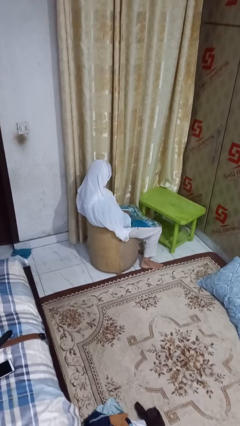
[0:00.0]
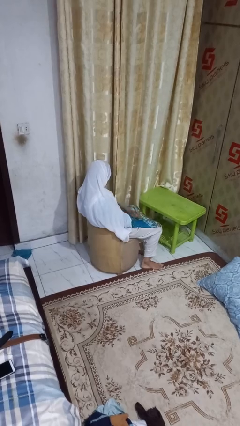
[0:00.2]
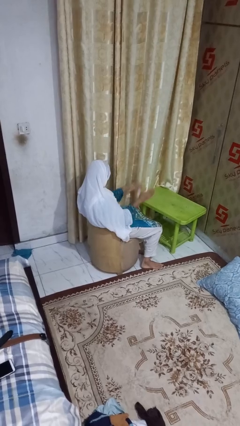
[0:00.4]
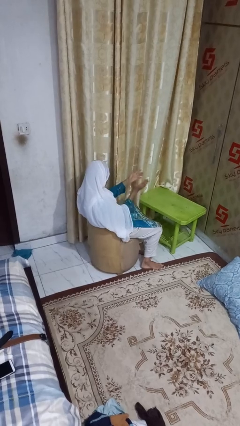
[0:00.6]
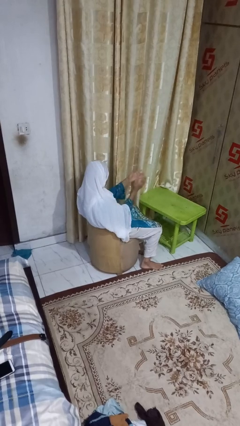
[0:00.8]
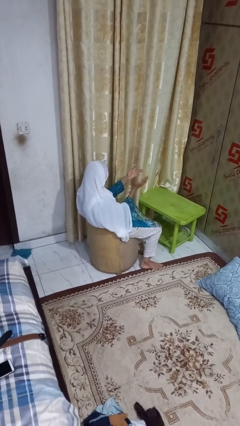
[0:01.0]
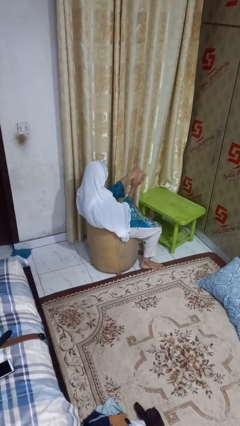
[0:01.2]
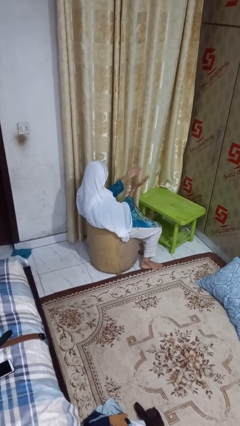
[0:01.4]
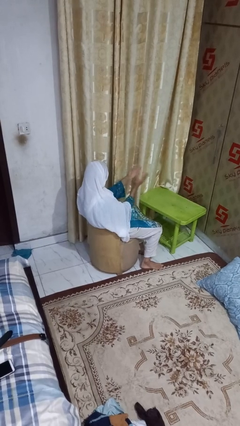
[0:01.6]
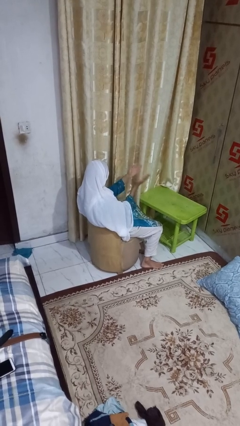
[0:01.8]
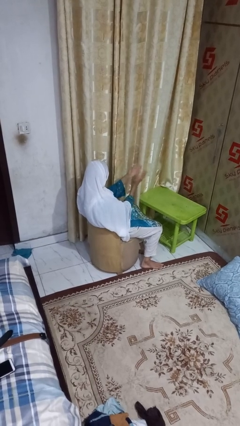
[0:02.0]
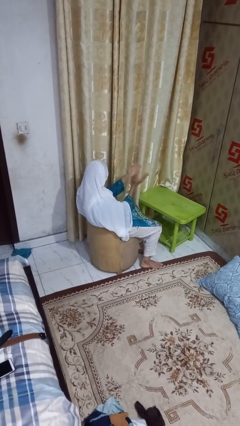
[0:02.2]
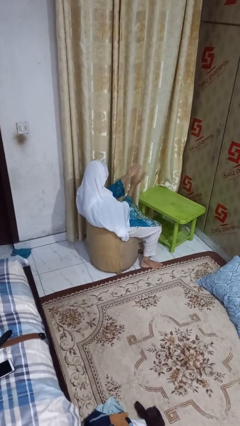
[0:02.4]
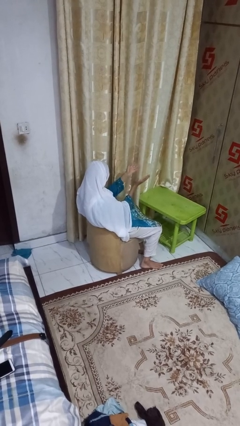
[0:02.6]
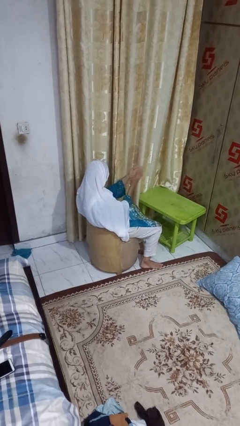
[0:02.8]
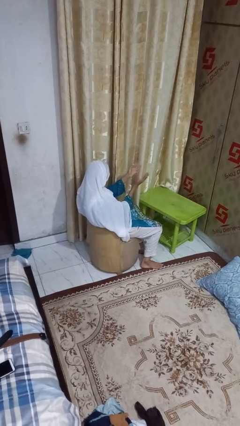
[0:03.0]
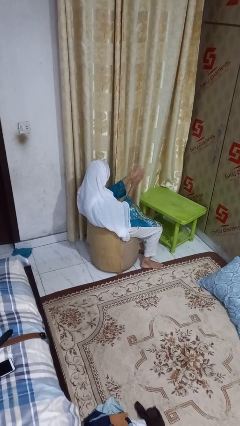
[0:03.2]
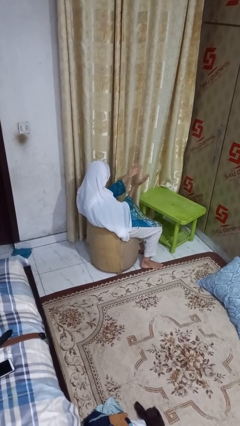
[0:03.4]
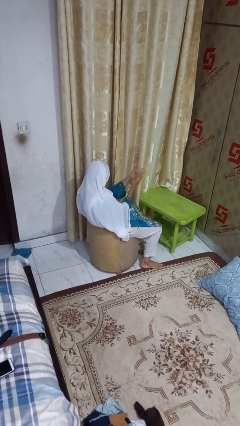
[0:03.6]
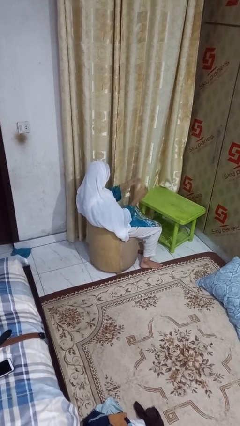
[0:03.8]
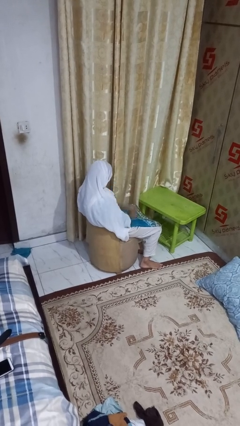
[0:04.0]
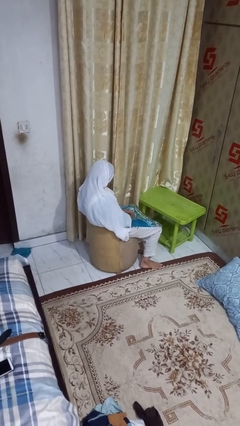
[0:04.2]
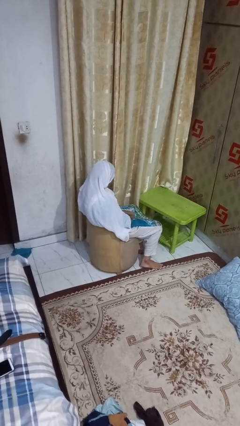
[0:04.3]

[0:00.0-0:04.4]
person claps hands

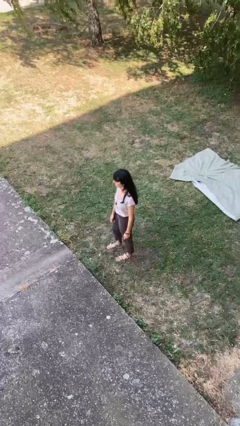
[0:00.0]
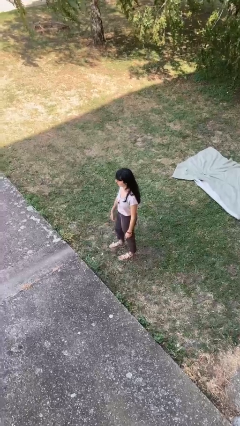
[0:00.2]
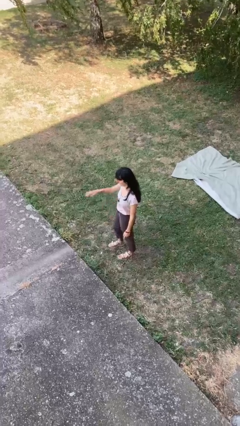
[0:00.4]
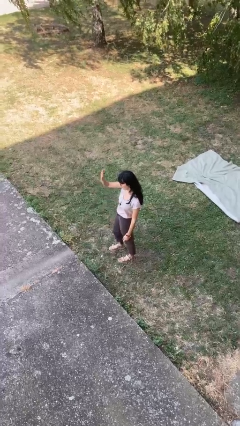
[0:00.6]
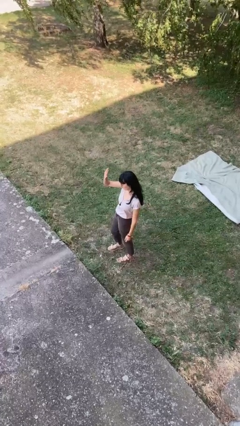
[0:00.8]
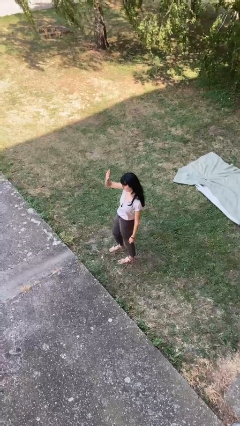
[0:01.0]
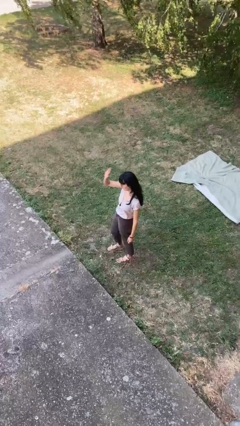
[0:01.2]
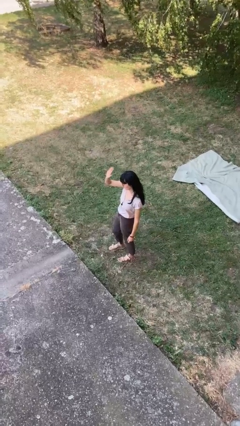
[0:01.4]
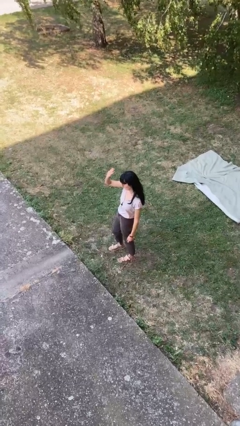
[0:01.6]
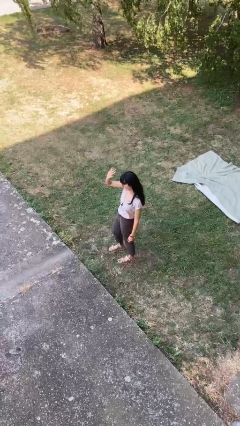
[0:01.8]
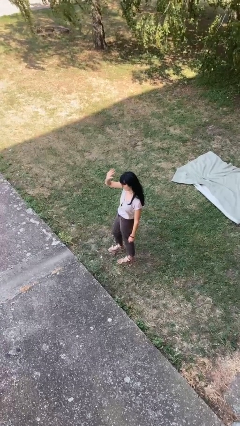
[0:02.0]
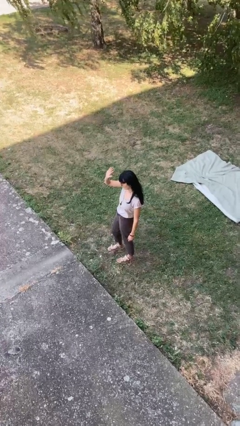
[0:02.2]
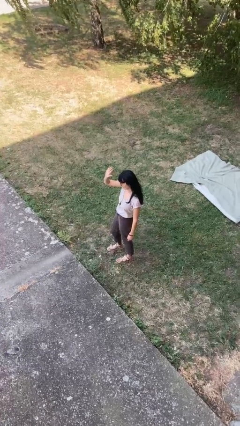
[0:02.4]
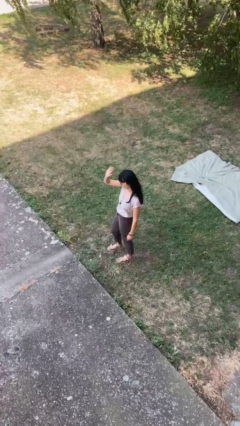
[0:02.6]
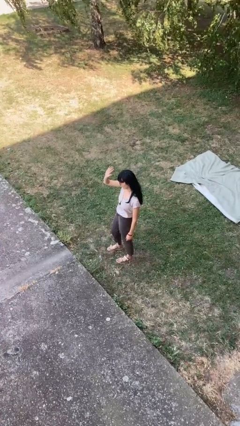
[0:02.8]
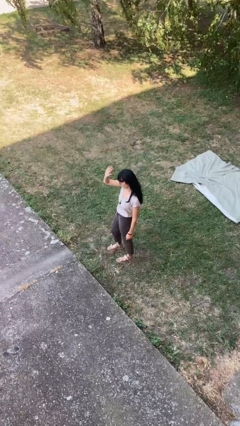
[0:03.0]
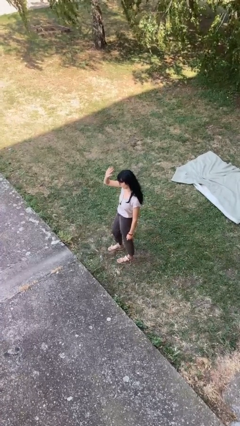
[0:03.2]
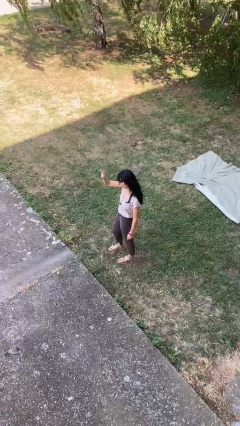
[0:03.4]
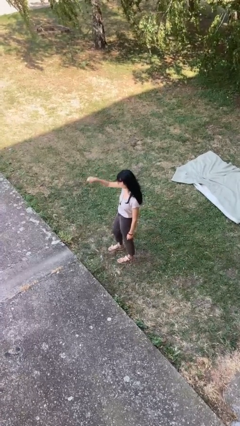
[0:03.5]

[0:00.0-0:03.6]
person waves at person

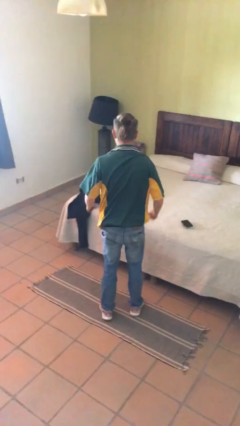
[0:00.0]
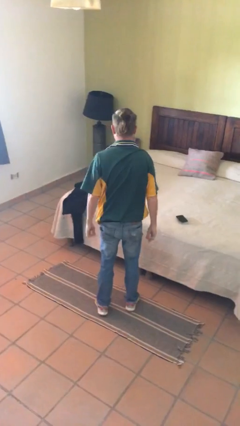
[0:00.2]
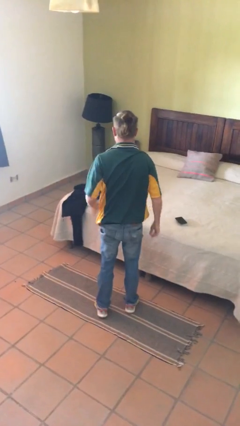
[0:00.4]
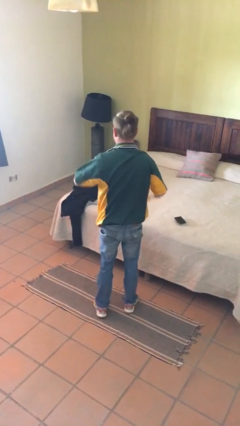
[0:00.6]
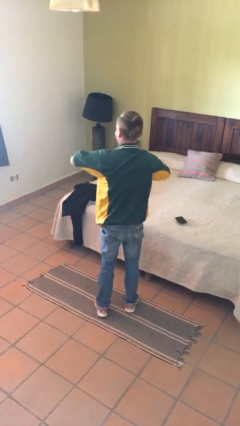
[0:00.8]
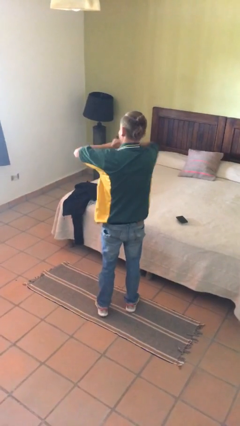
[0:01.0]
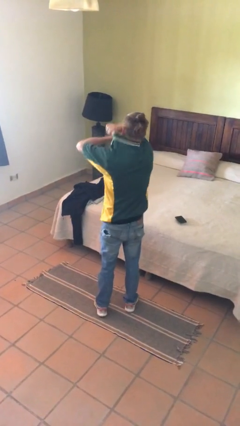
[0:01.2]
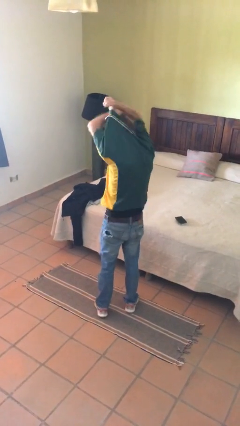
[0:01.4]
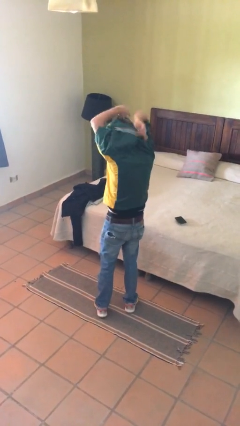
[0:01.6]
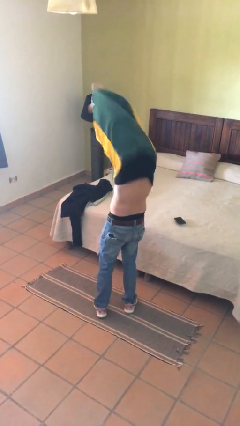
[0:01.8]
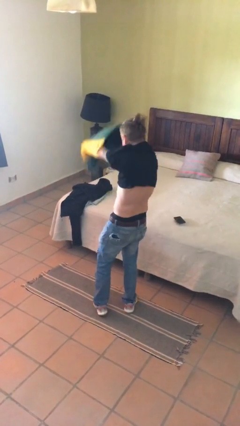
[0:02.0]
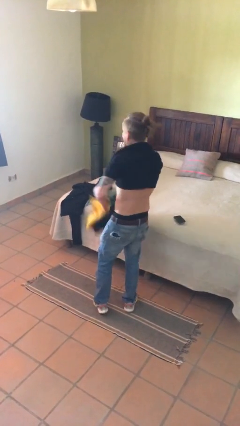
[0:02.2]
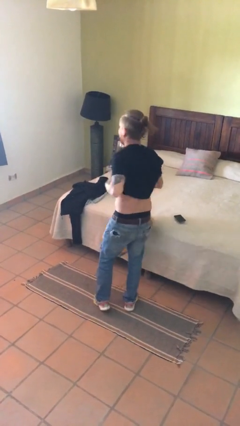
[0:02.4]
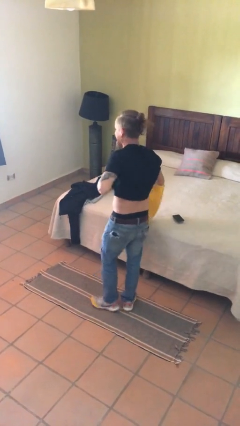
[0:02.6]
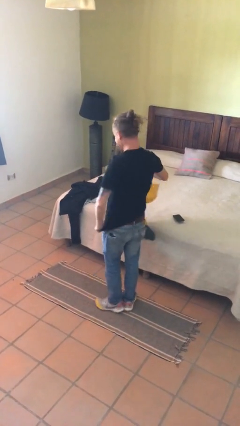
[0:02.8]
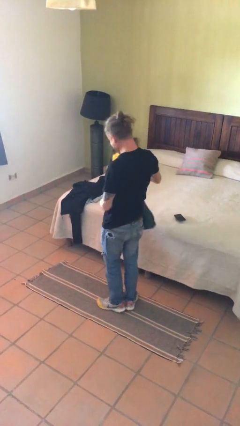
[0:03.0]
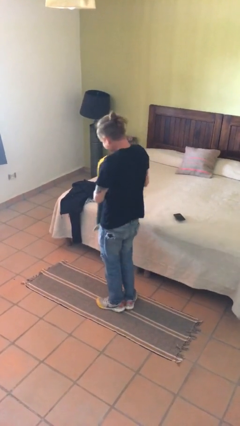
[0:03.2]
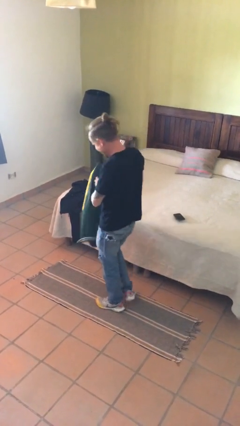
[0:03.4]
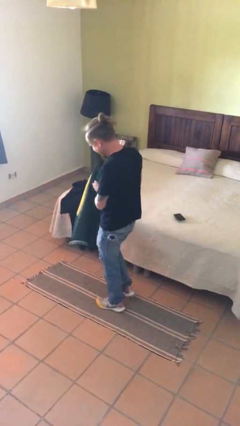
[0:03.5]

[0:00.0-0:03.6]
person takes off shirt

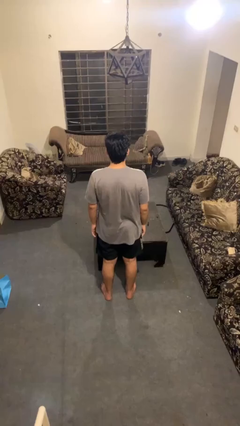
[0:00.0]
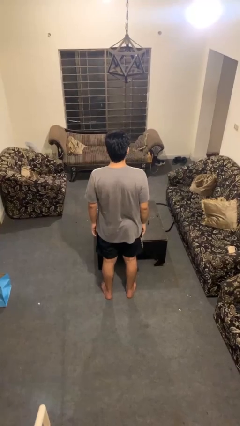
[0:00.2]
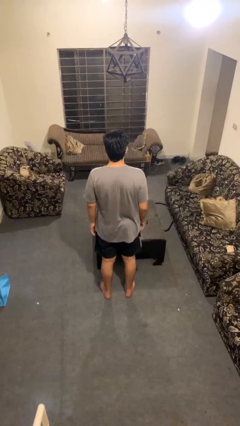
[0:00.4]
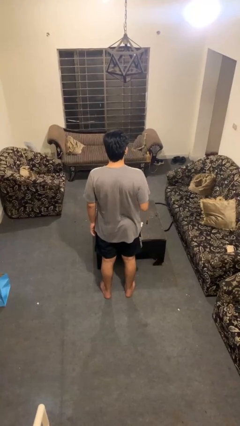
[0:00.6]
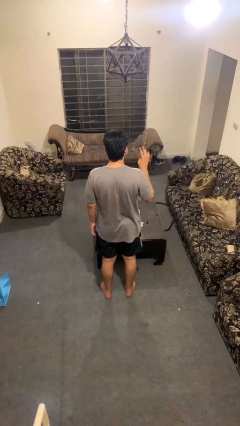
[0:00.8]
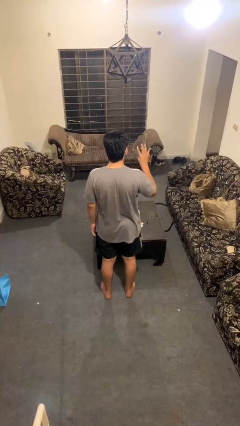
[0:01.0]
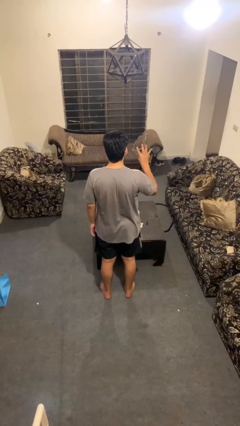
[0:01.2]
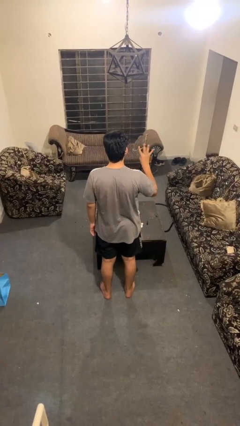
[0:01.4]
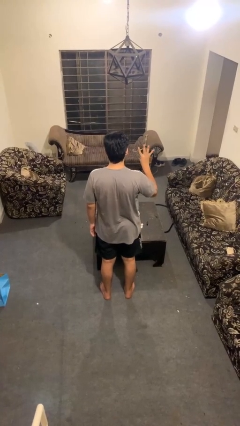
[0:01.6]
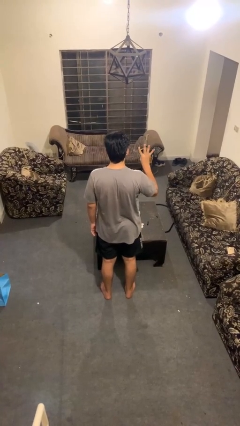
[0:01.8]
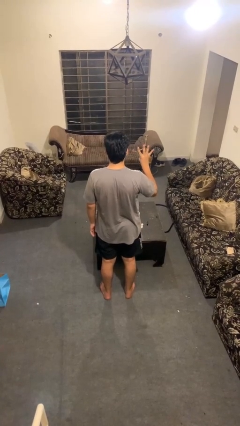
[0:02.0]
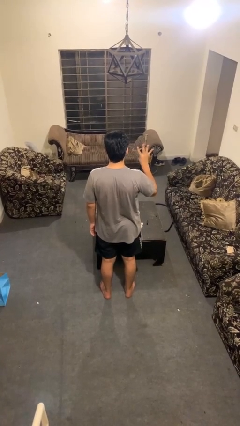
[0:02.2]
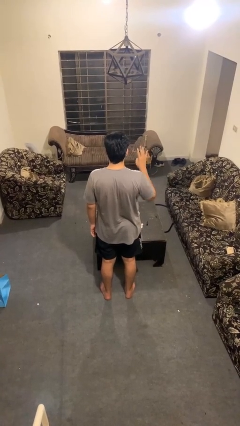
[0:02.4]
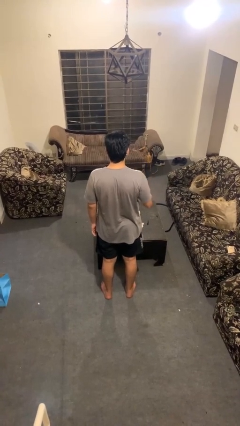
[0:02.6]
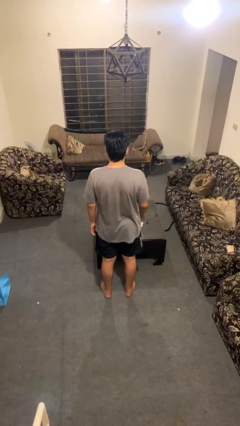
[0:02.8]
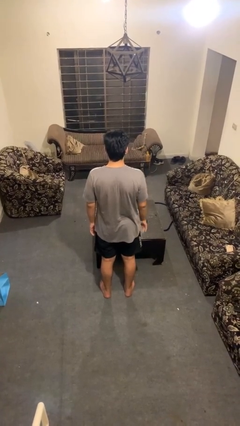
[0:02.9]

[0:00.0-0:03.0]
person gestures number four

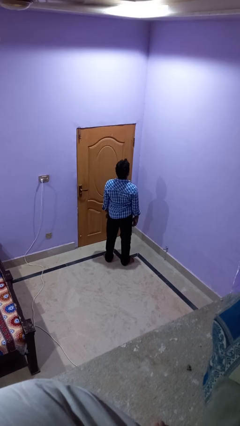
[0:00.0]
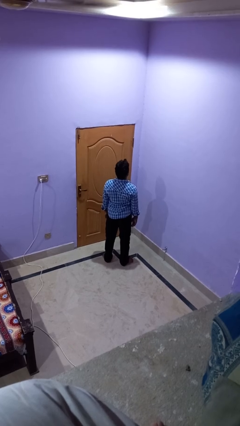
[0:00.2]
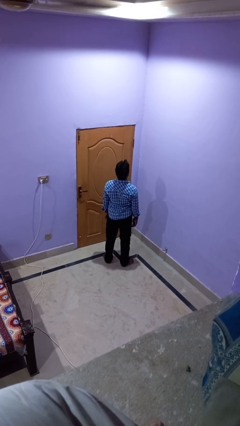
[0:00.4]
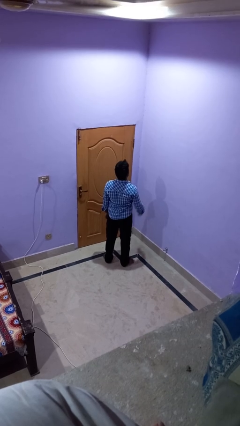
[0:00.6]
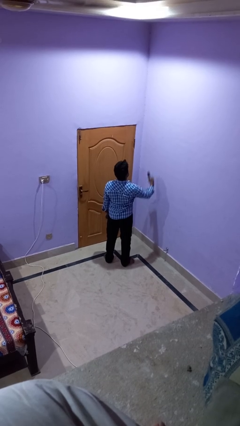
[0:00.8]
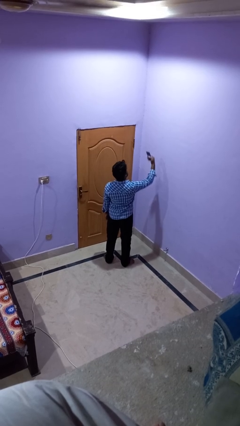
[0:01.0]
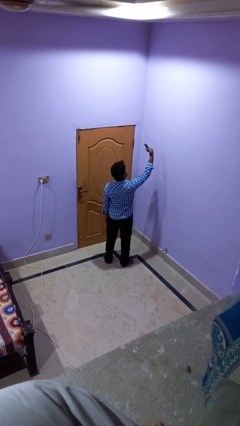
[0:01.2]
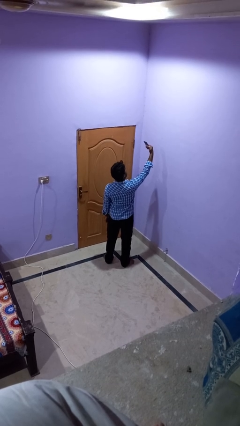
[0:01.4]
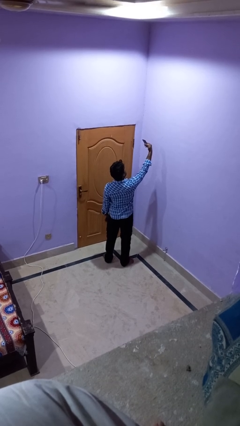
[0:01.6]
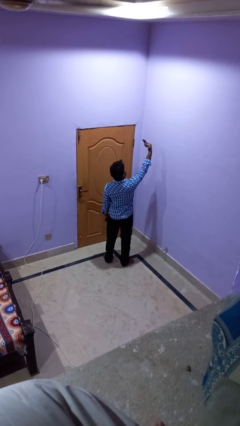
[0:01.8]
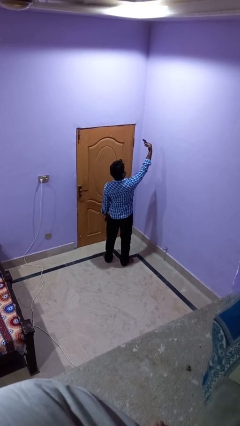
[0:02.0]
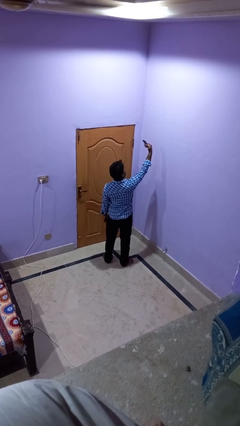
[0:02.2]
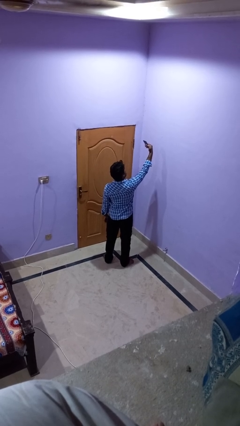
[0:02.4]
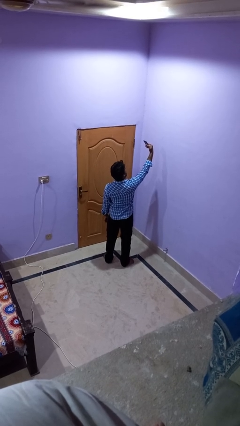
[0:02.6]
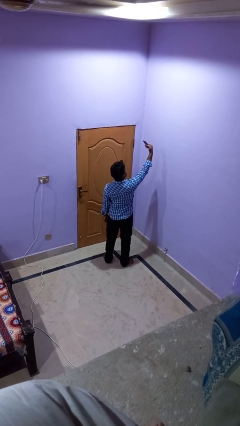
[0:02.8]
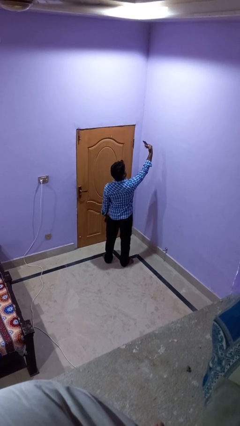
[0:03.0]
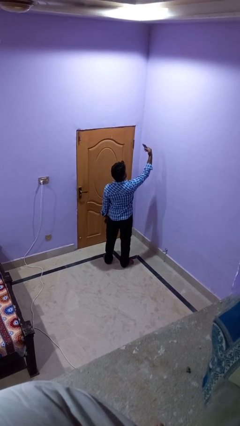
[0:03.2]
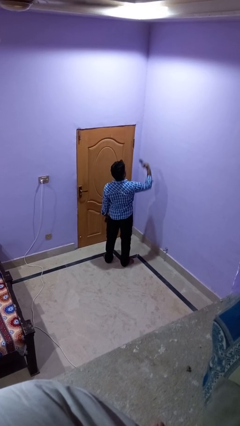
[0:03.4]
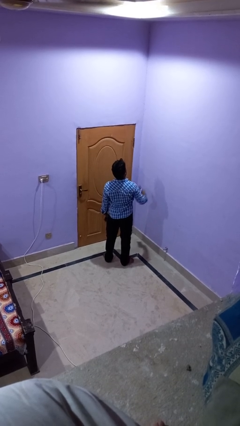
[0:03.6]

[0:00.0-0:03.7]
person takes selfie
